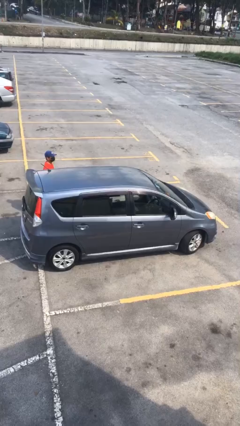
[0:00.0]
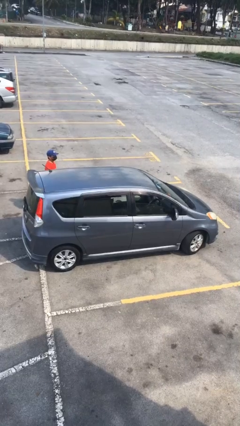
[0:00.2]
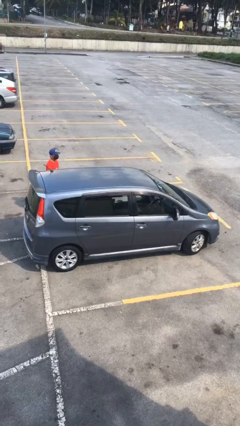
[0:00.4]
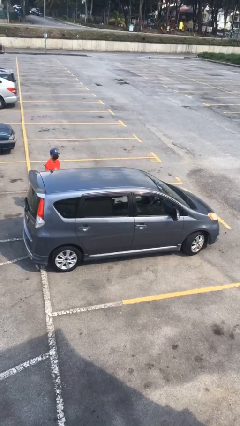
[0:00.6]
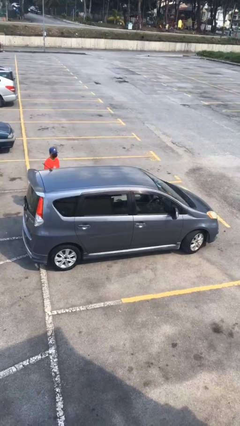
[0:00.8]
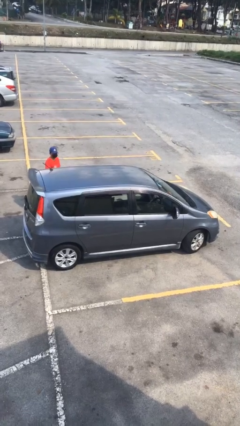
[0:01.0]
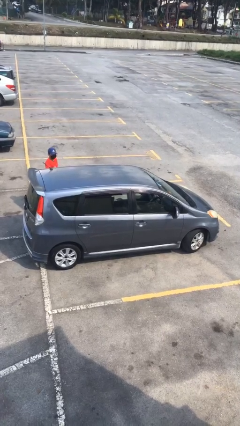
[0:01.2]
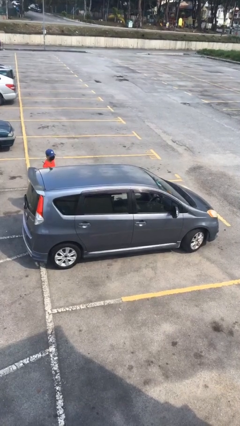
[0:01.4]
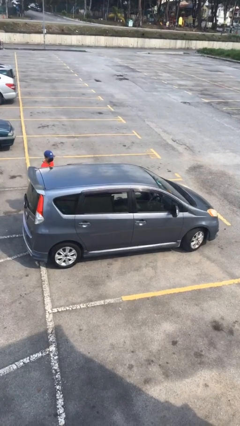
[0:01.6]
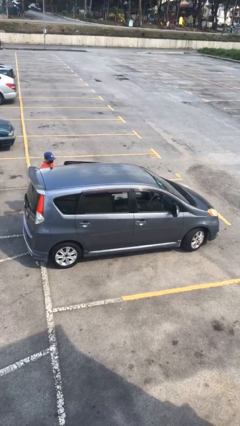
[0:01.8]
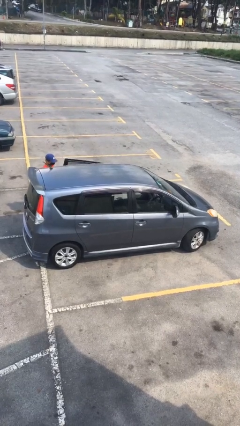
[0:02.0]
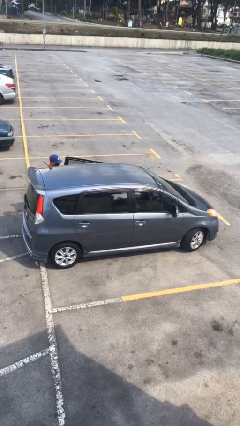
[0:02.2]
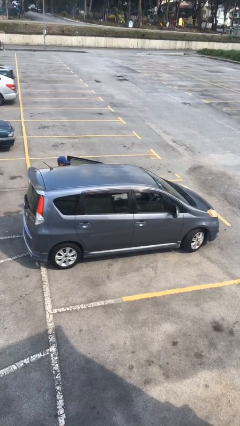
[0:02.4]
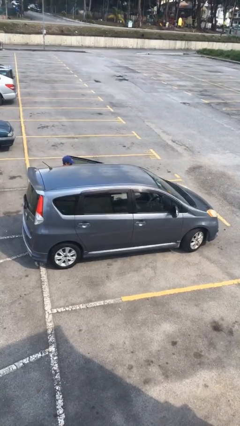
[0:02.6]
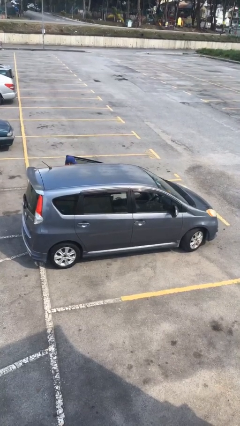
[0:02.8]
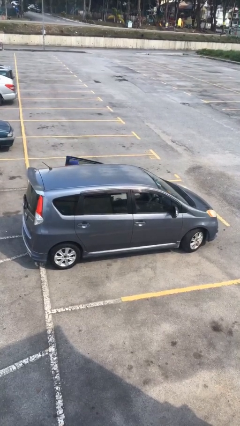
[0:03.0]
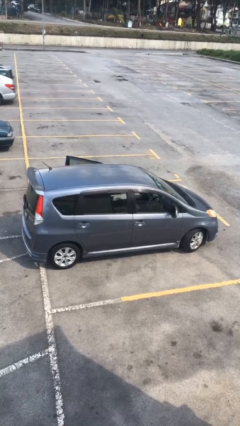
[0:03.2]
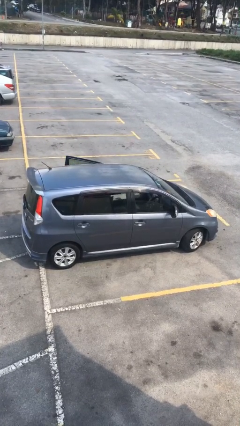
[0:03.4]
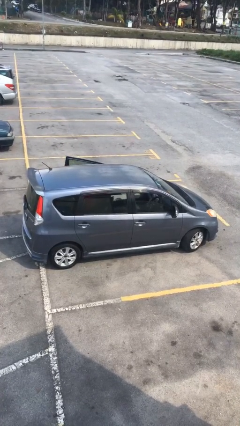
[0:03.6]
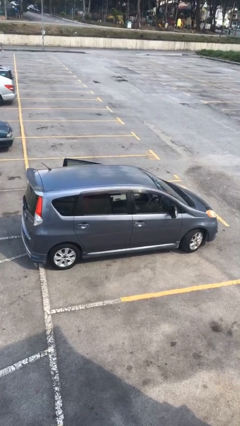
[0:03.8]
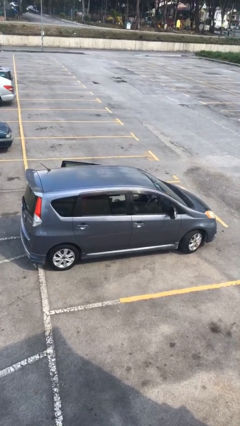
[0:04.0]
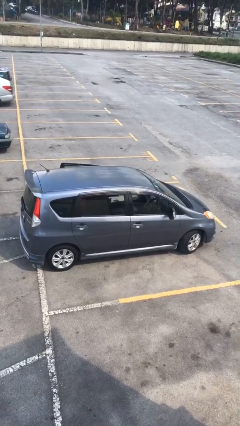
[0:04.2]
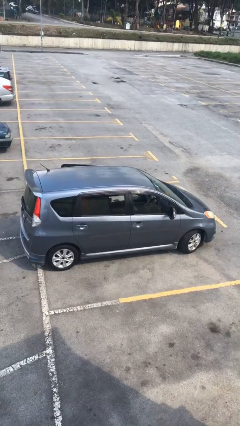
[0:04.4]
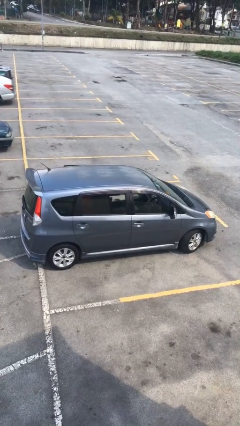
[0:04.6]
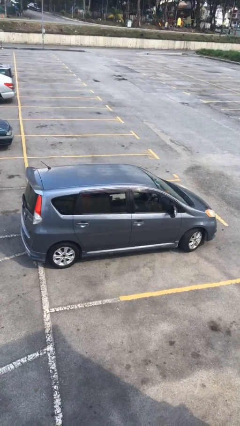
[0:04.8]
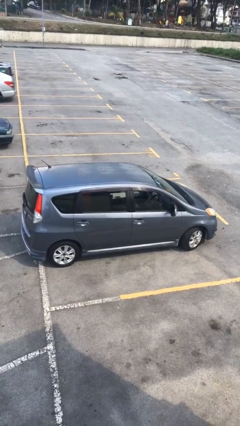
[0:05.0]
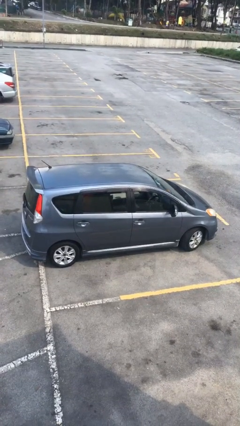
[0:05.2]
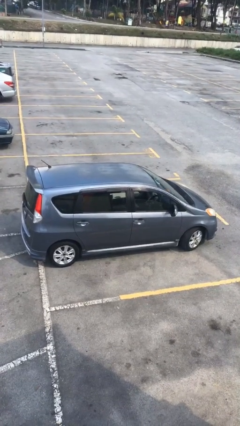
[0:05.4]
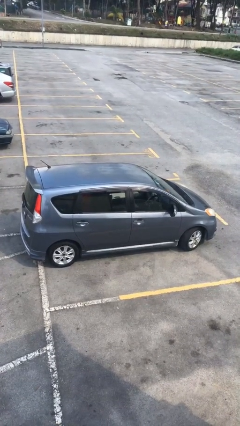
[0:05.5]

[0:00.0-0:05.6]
car picks up person

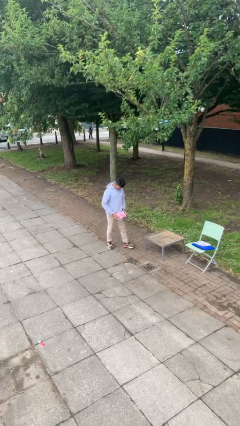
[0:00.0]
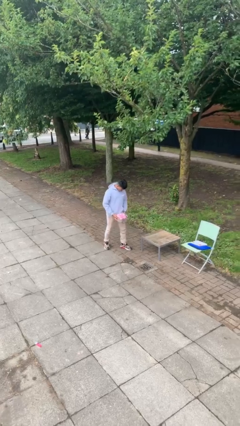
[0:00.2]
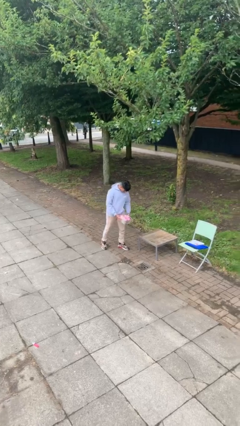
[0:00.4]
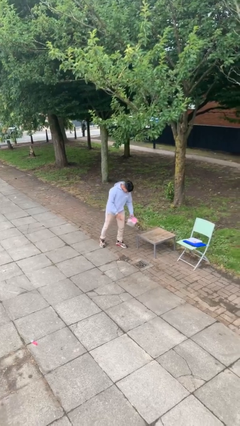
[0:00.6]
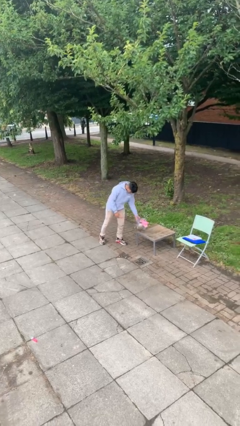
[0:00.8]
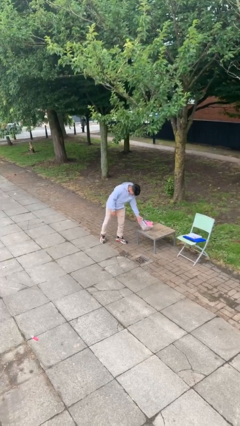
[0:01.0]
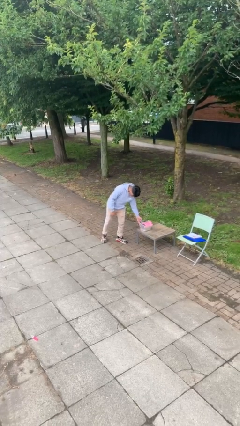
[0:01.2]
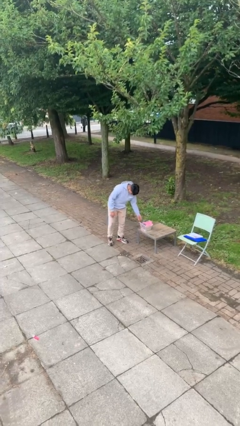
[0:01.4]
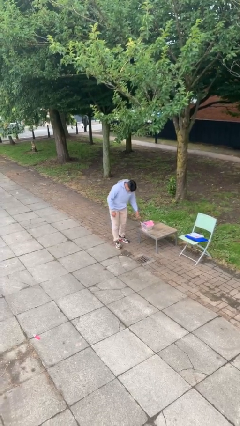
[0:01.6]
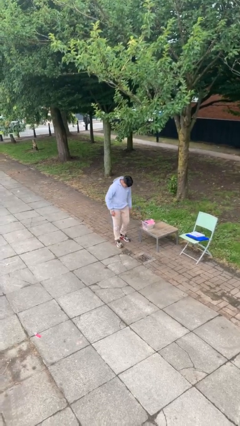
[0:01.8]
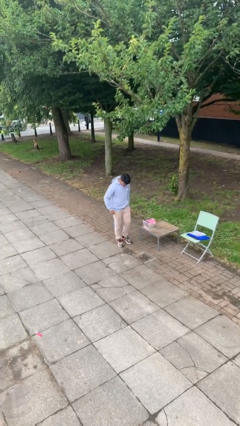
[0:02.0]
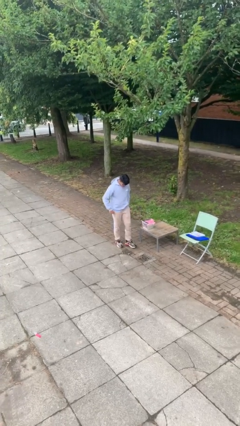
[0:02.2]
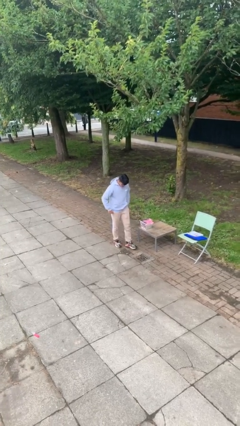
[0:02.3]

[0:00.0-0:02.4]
person puts down object on table

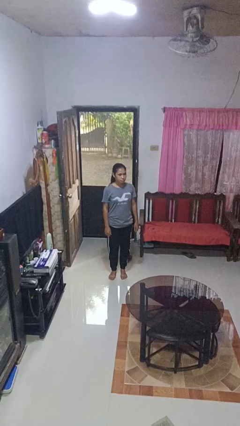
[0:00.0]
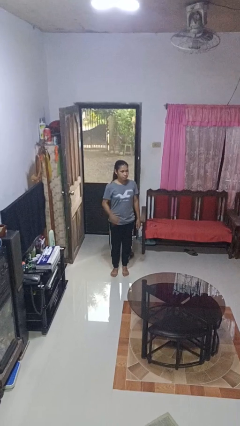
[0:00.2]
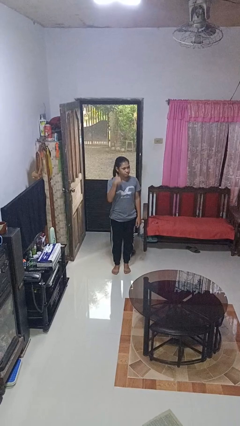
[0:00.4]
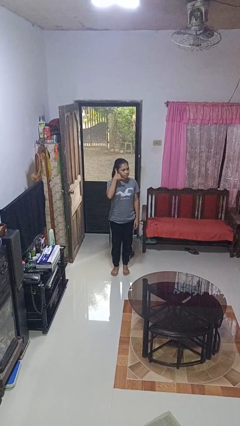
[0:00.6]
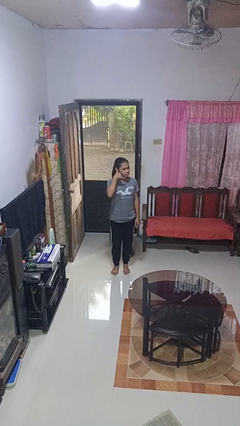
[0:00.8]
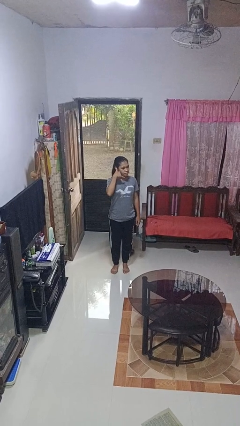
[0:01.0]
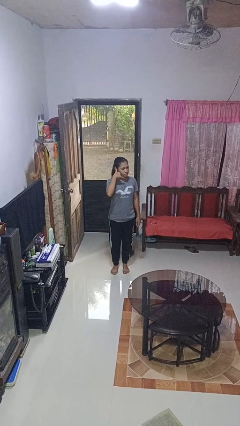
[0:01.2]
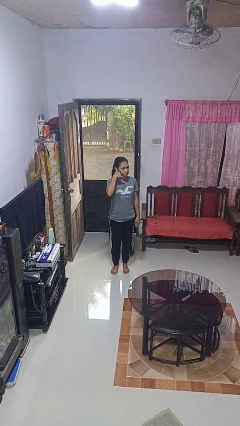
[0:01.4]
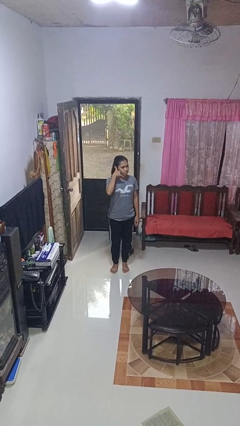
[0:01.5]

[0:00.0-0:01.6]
person gestures call me

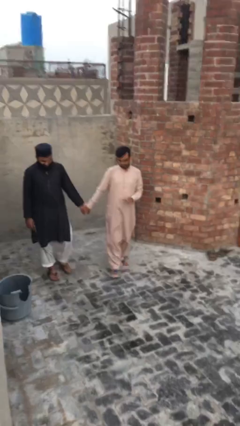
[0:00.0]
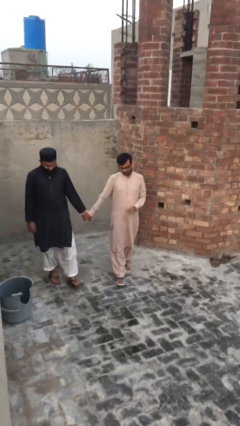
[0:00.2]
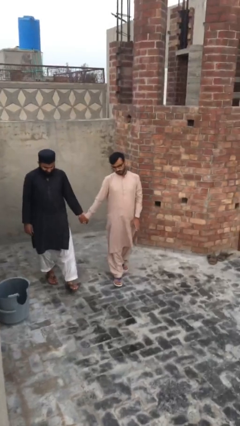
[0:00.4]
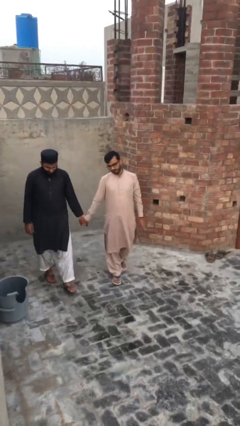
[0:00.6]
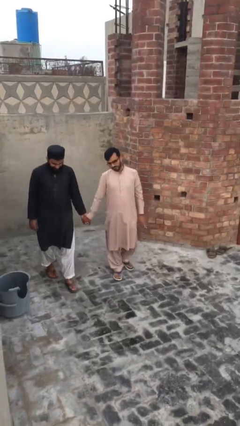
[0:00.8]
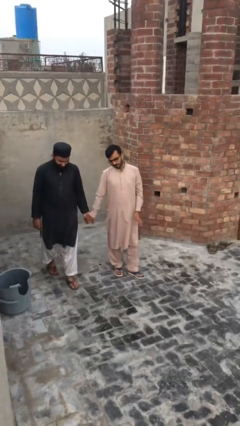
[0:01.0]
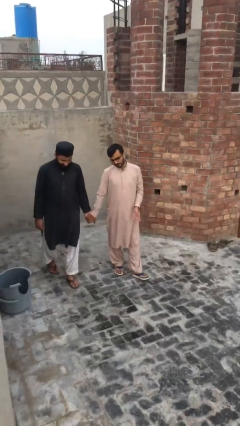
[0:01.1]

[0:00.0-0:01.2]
person holds hand

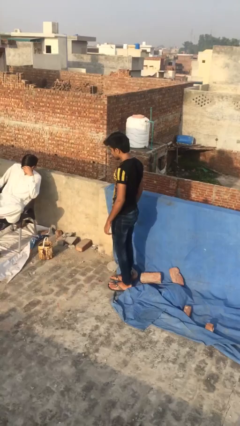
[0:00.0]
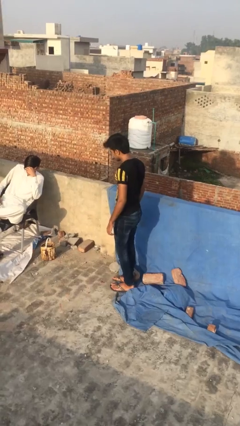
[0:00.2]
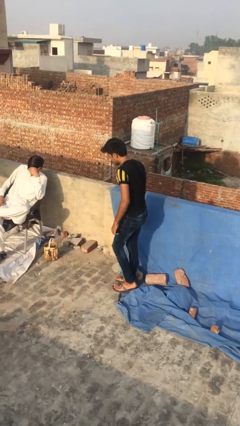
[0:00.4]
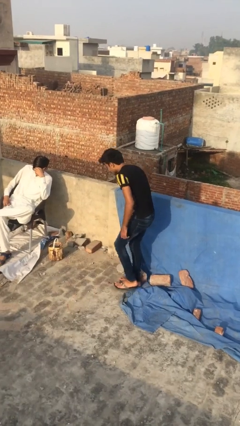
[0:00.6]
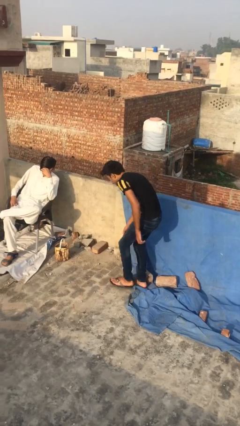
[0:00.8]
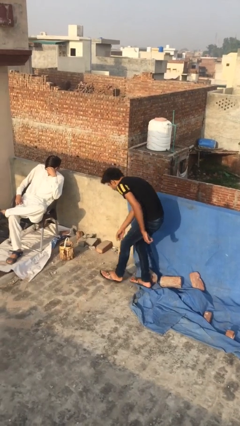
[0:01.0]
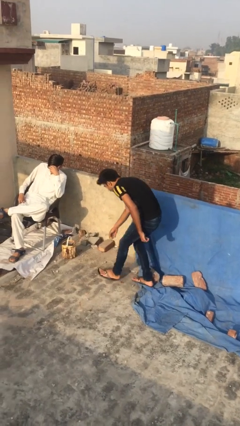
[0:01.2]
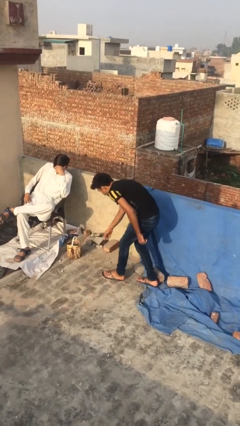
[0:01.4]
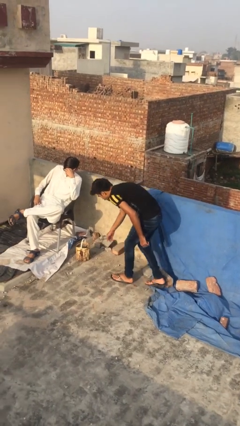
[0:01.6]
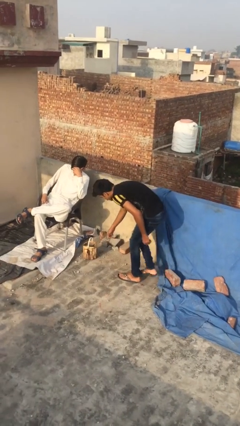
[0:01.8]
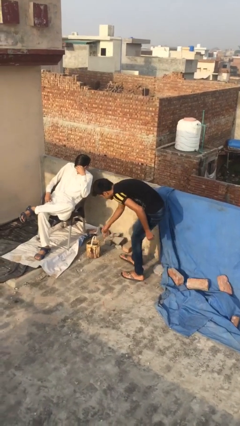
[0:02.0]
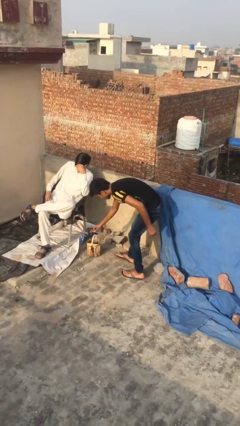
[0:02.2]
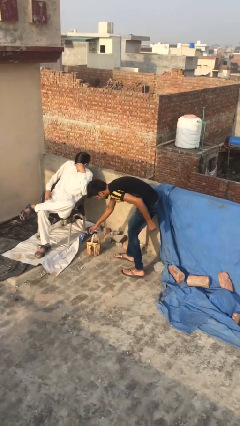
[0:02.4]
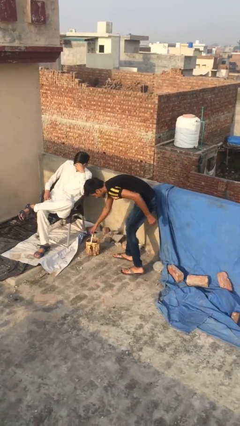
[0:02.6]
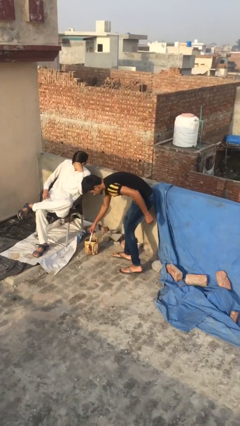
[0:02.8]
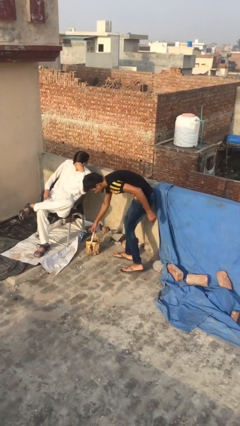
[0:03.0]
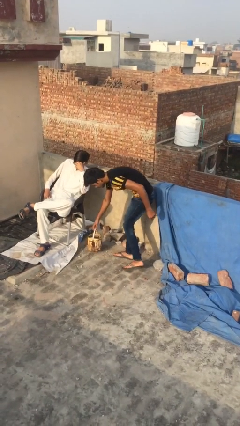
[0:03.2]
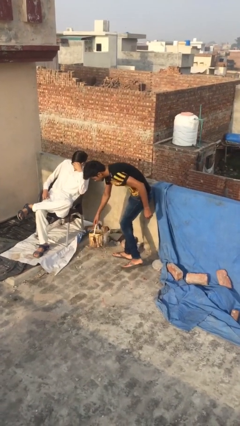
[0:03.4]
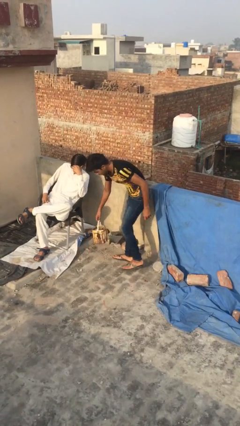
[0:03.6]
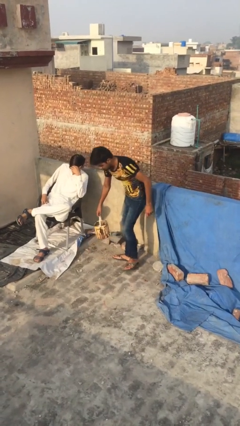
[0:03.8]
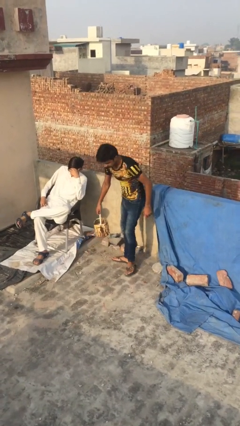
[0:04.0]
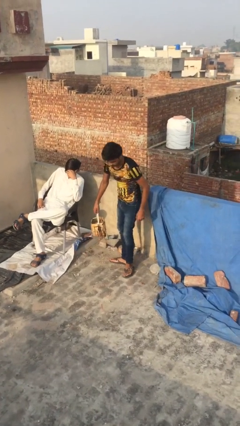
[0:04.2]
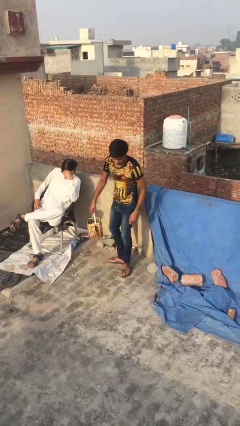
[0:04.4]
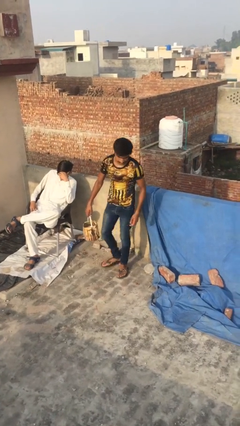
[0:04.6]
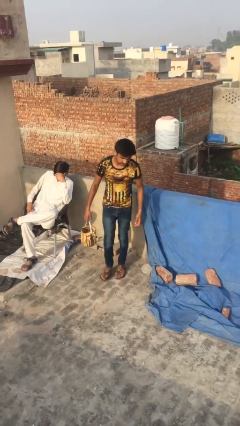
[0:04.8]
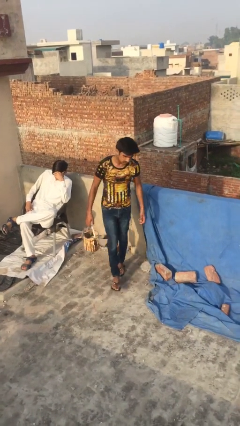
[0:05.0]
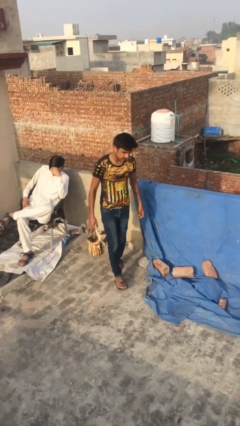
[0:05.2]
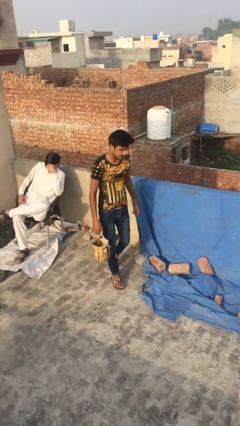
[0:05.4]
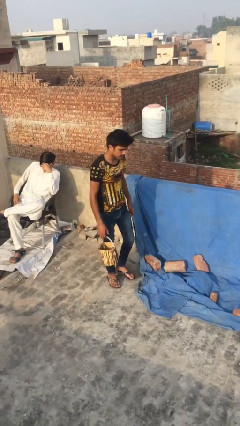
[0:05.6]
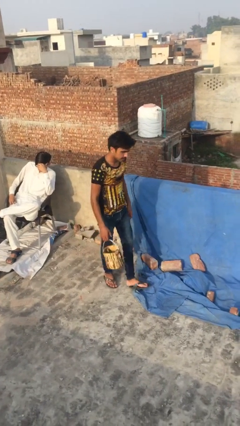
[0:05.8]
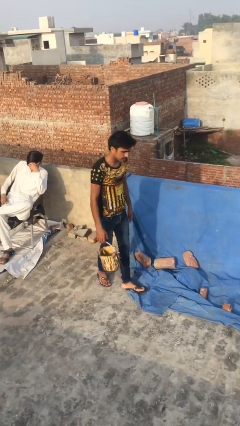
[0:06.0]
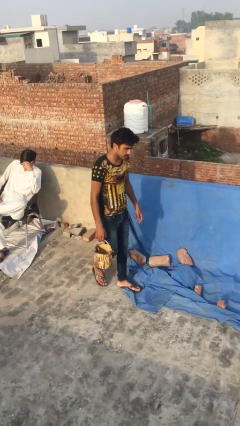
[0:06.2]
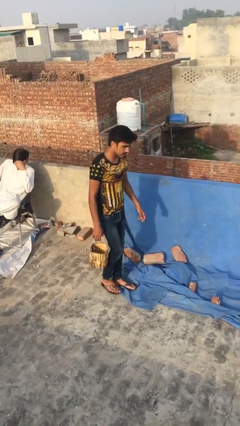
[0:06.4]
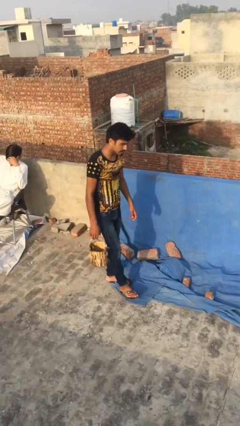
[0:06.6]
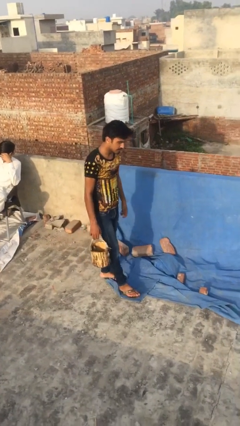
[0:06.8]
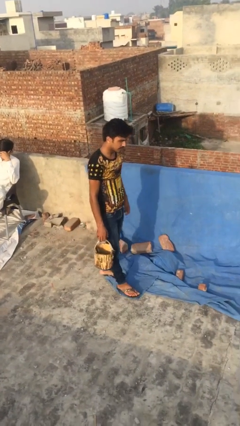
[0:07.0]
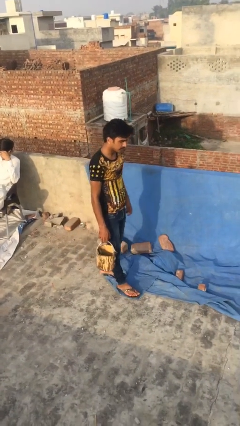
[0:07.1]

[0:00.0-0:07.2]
person steals object from person
